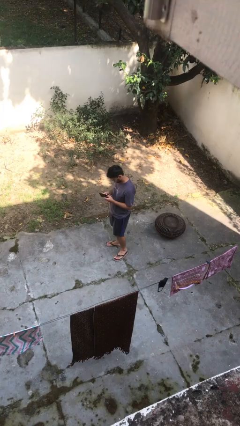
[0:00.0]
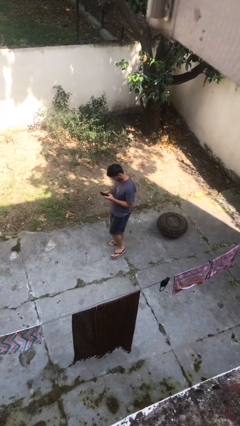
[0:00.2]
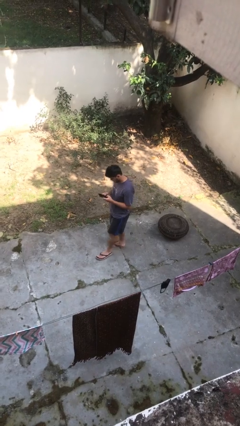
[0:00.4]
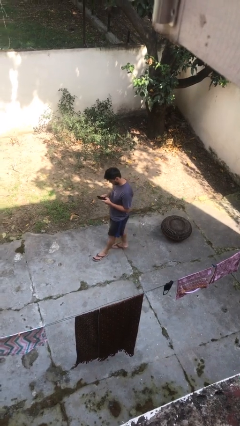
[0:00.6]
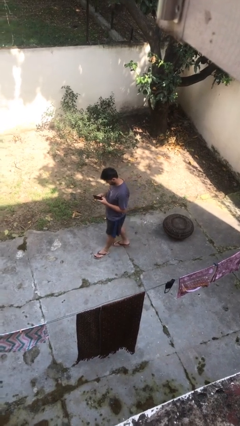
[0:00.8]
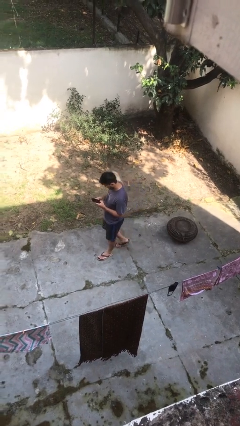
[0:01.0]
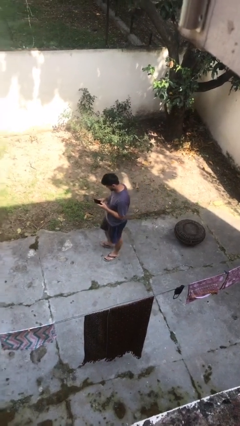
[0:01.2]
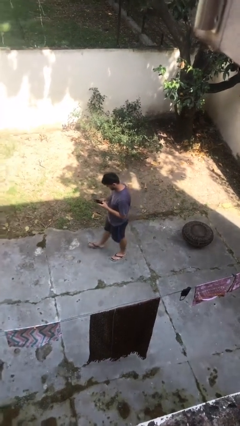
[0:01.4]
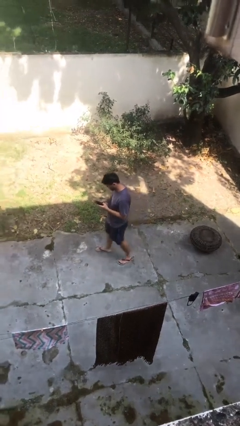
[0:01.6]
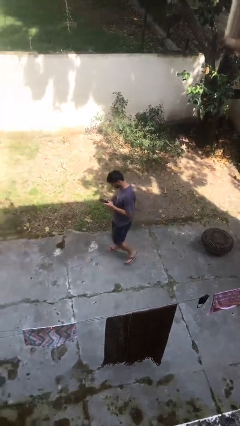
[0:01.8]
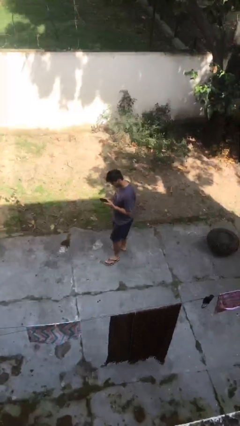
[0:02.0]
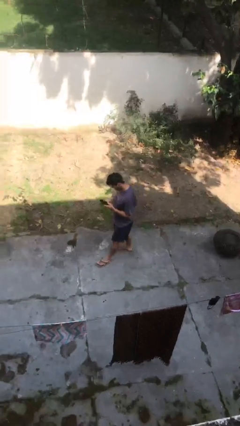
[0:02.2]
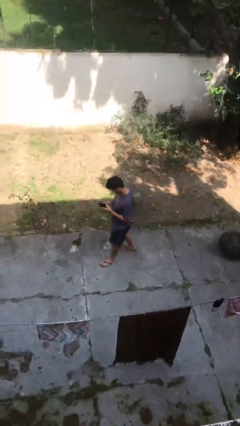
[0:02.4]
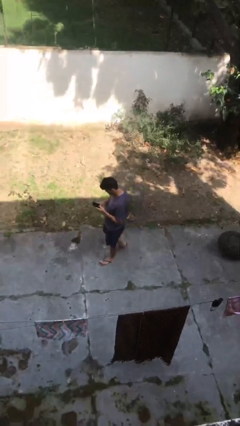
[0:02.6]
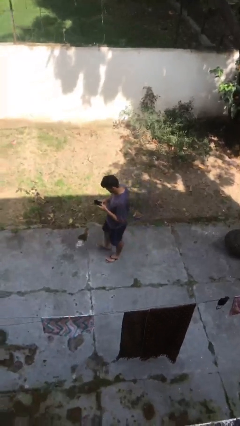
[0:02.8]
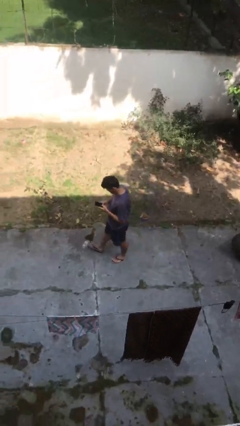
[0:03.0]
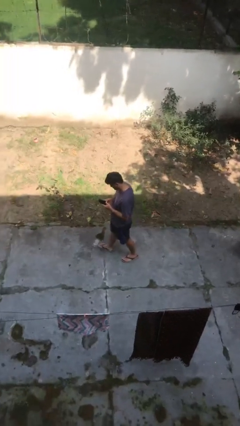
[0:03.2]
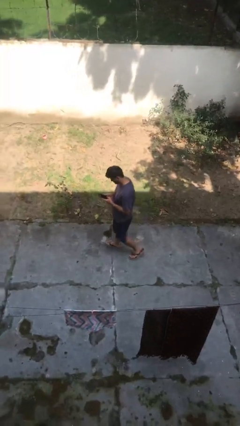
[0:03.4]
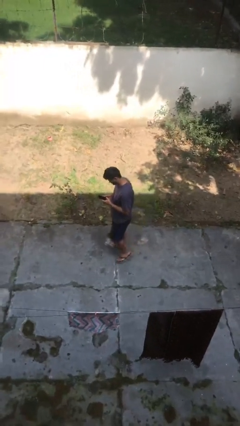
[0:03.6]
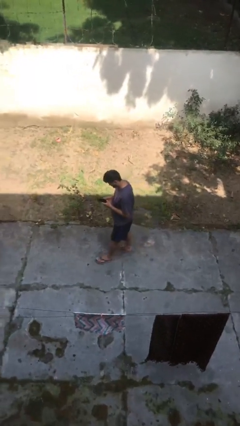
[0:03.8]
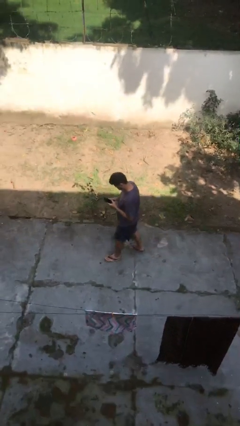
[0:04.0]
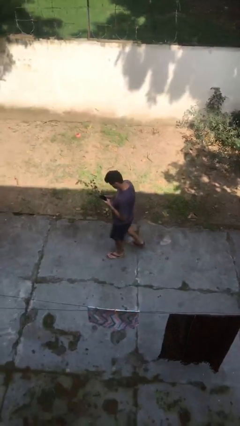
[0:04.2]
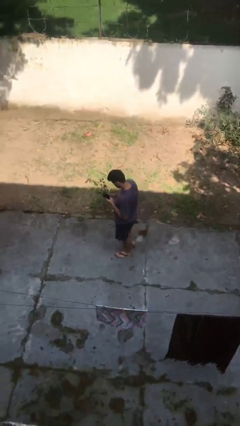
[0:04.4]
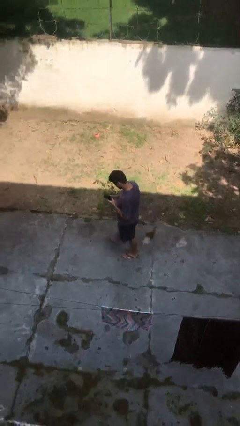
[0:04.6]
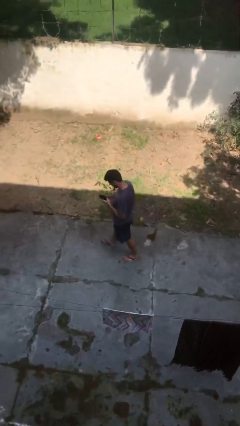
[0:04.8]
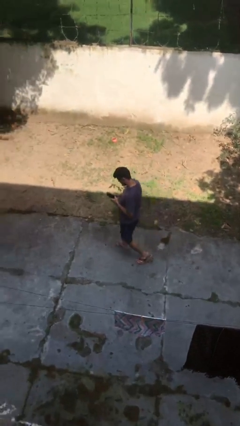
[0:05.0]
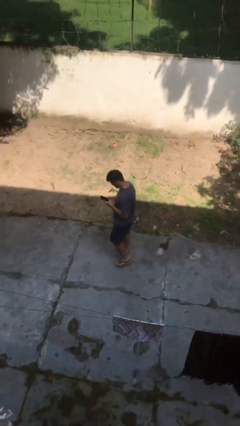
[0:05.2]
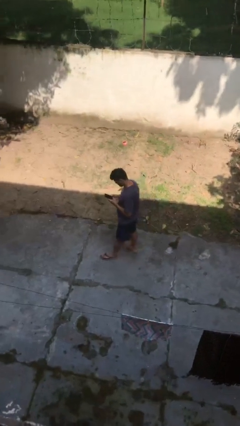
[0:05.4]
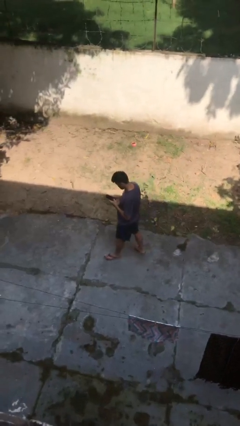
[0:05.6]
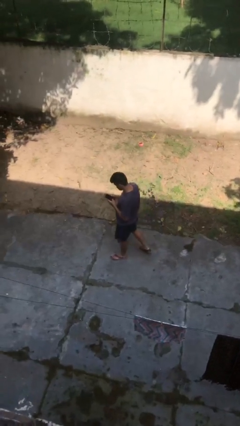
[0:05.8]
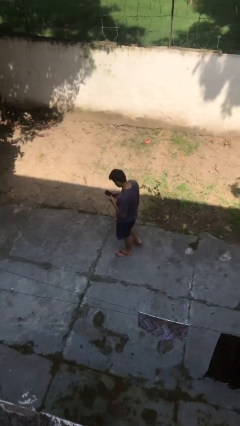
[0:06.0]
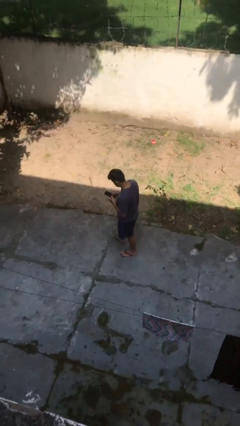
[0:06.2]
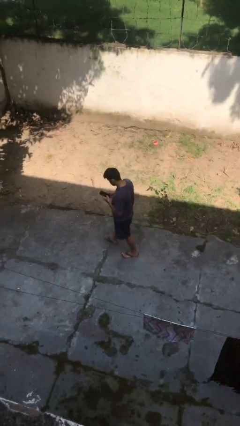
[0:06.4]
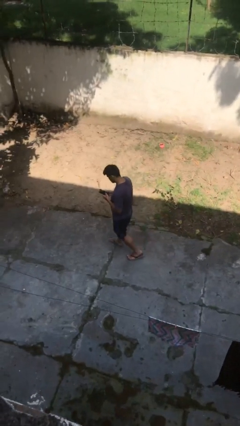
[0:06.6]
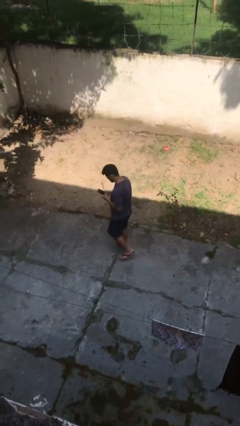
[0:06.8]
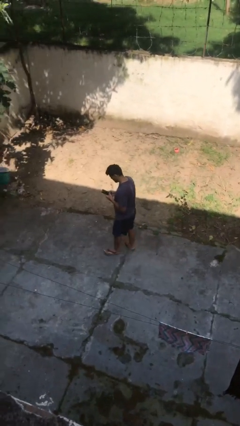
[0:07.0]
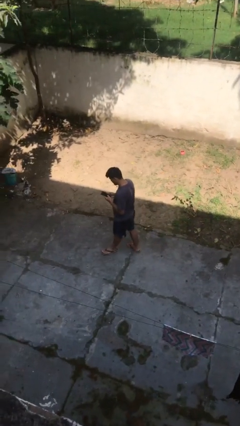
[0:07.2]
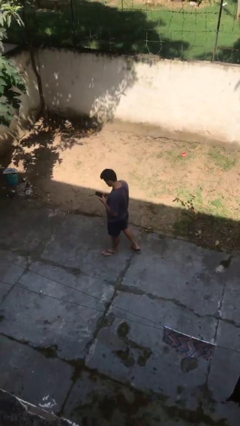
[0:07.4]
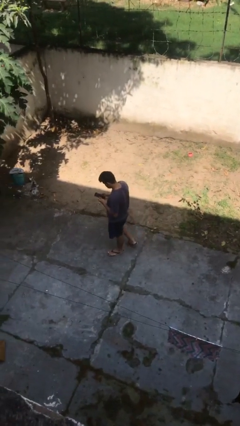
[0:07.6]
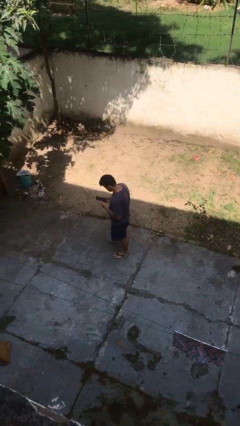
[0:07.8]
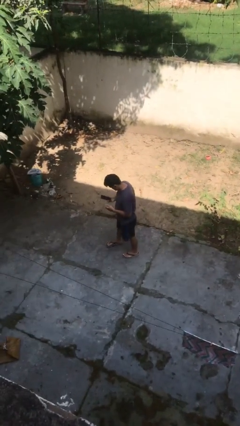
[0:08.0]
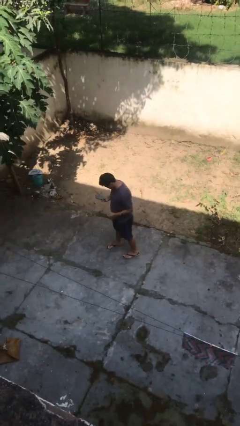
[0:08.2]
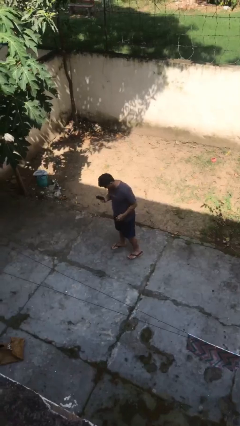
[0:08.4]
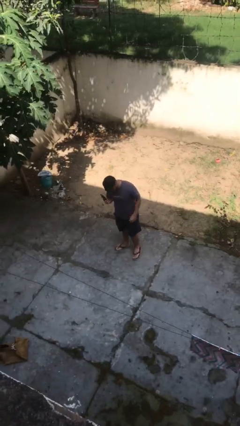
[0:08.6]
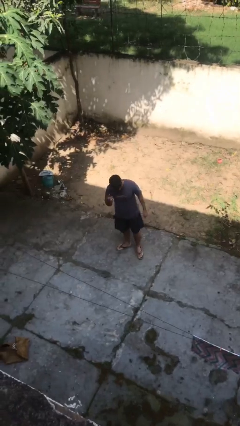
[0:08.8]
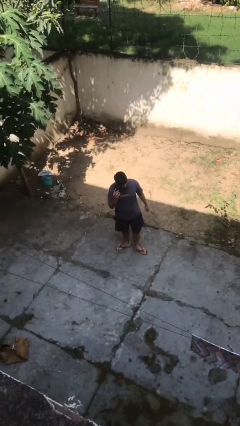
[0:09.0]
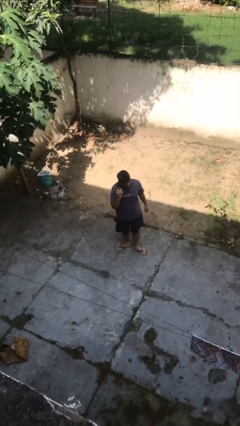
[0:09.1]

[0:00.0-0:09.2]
person texts on phone

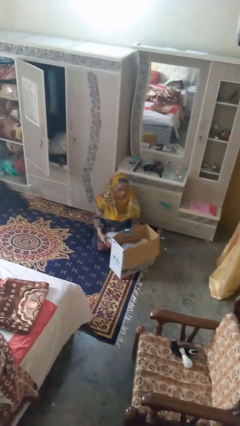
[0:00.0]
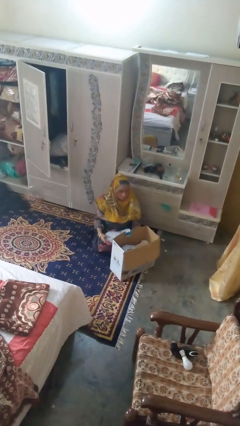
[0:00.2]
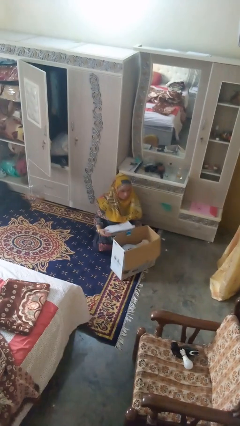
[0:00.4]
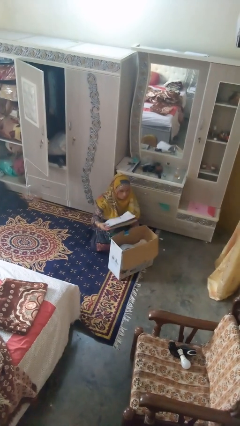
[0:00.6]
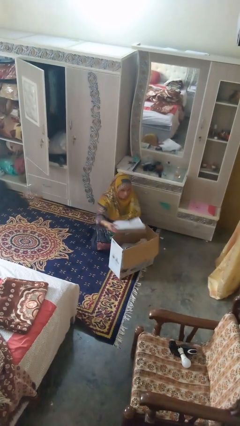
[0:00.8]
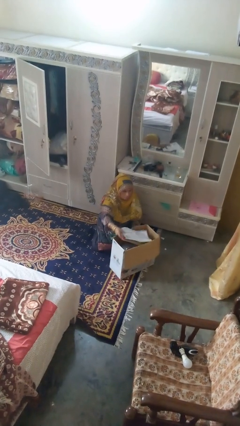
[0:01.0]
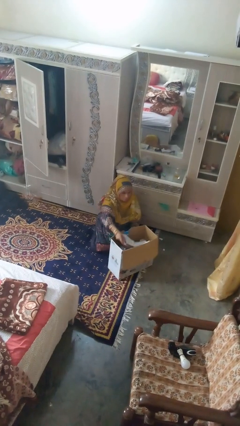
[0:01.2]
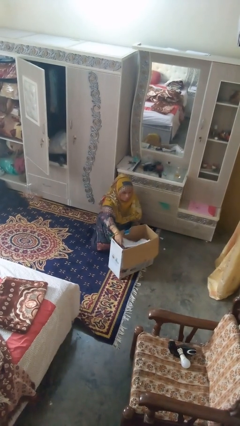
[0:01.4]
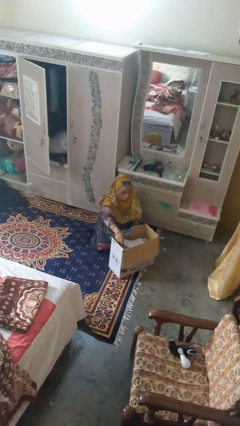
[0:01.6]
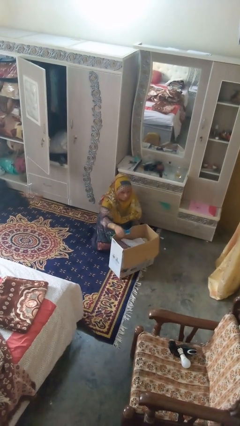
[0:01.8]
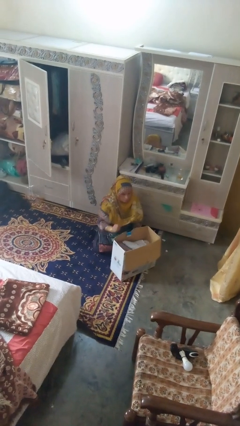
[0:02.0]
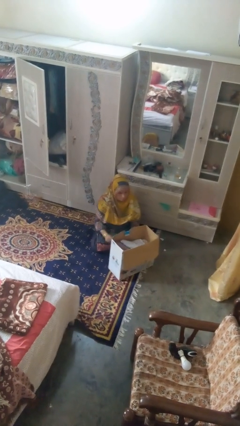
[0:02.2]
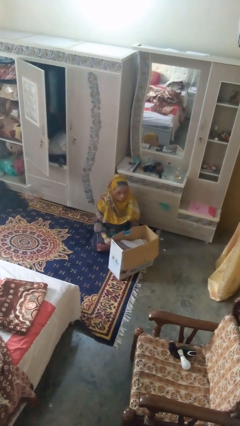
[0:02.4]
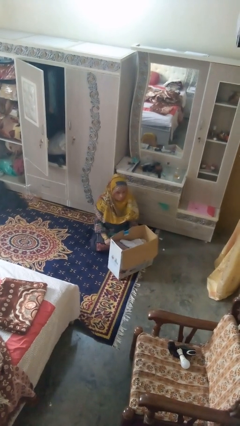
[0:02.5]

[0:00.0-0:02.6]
person puts object into box

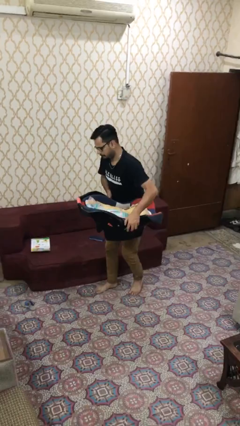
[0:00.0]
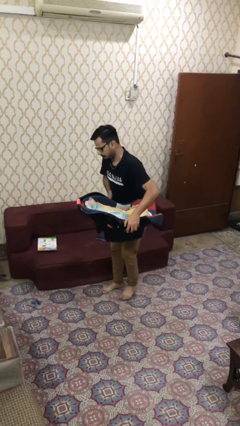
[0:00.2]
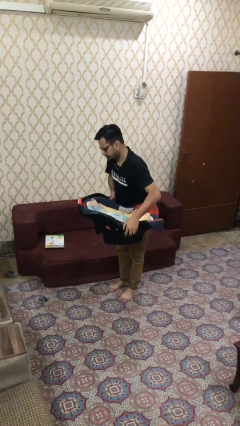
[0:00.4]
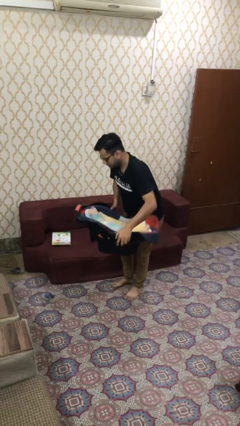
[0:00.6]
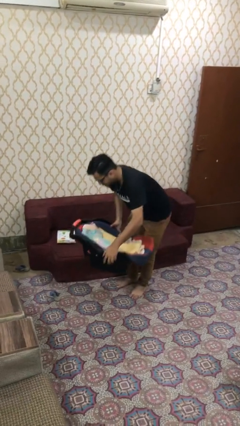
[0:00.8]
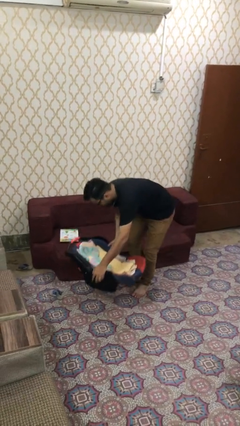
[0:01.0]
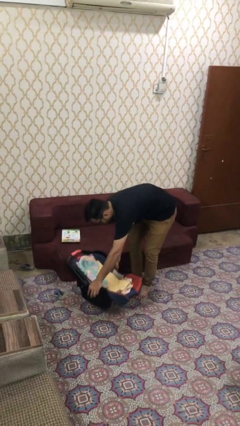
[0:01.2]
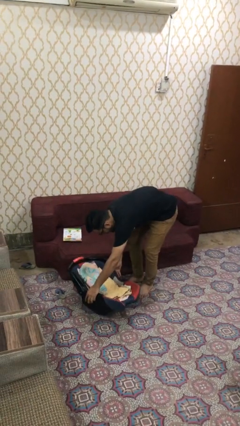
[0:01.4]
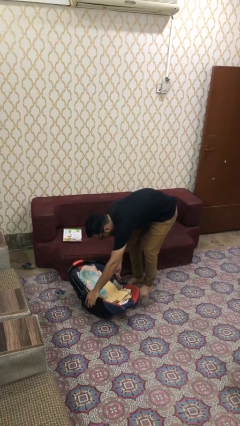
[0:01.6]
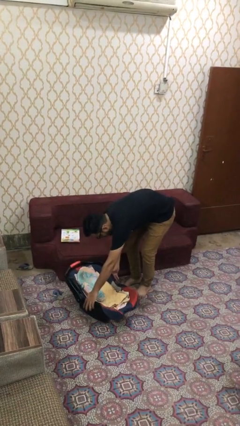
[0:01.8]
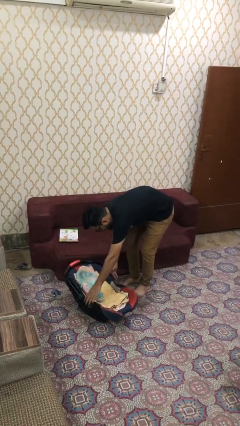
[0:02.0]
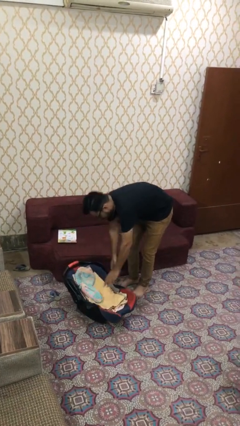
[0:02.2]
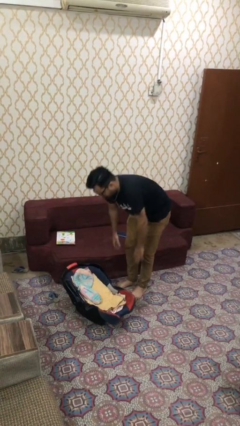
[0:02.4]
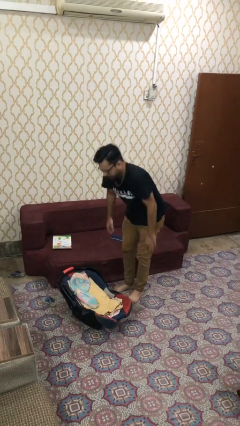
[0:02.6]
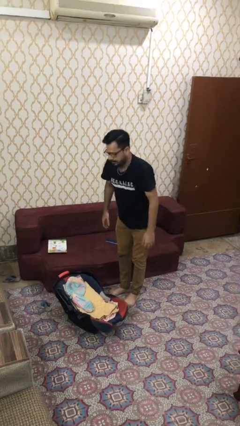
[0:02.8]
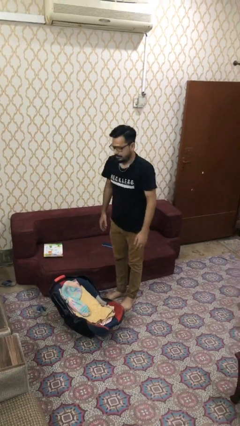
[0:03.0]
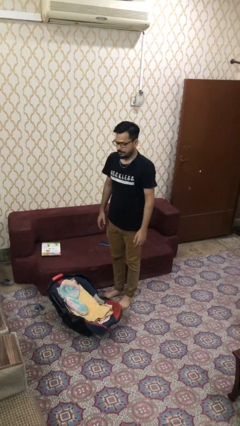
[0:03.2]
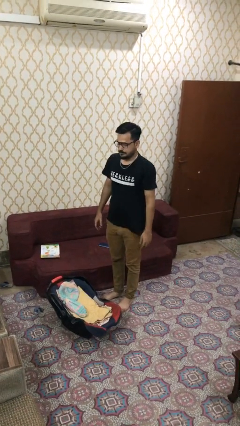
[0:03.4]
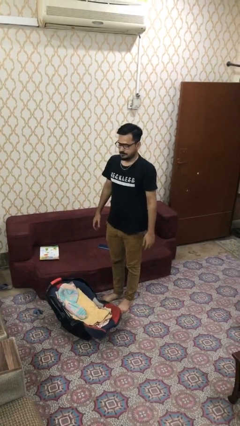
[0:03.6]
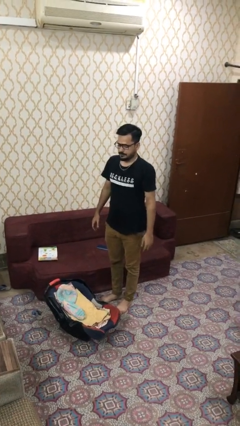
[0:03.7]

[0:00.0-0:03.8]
person puts down object on floor

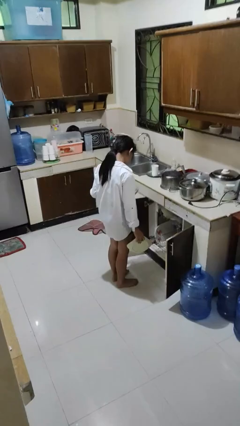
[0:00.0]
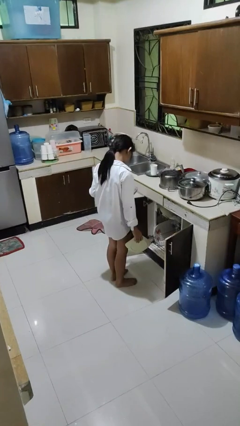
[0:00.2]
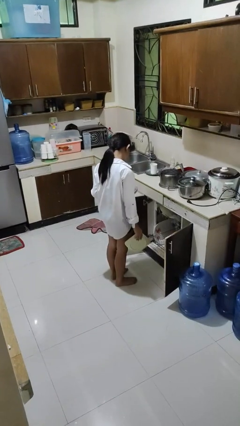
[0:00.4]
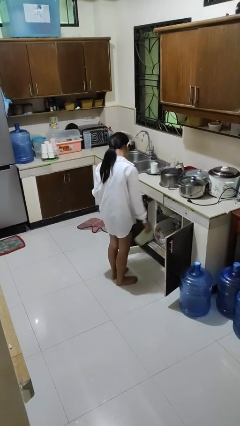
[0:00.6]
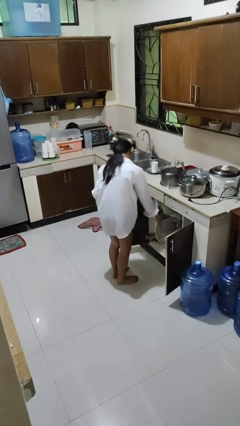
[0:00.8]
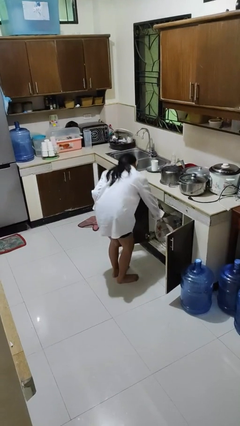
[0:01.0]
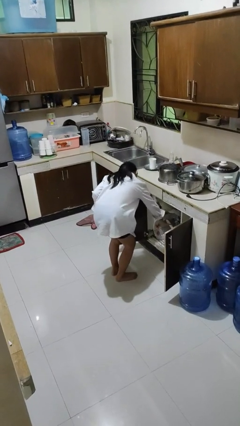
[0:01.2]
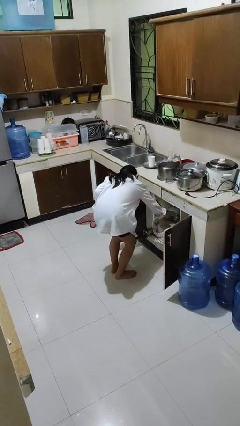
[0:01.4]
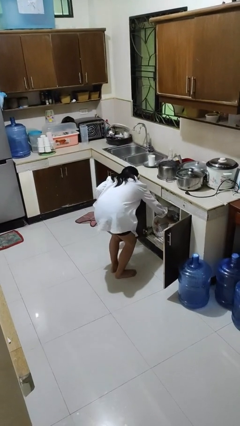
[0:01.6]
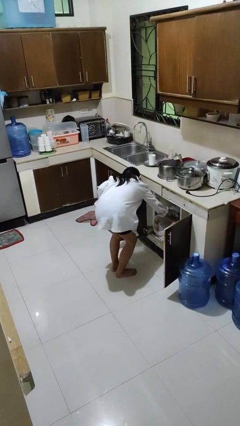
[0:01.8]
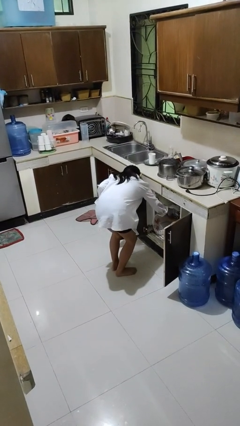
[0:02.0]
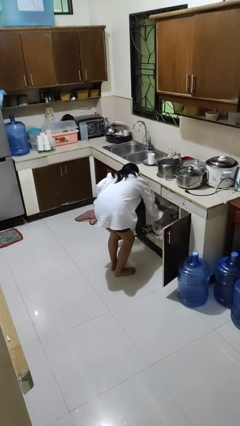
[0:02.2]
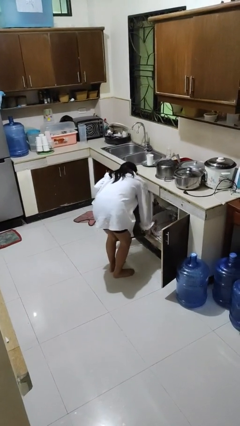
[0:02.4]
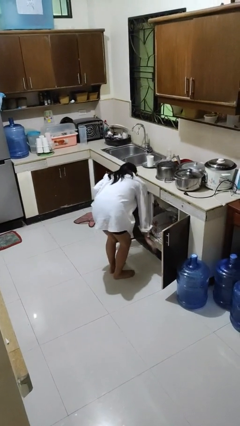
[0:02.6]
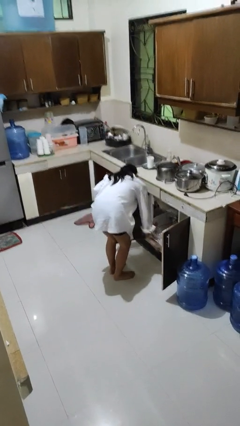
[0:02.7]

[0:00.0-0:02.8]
person loads dishwasher
